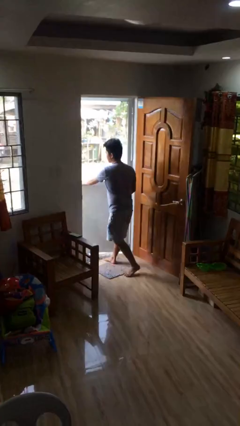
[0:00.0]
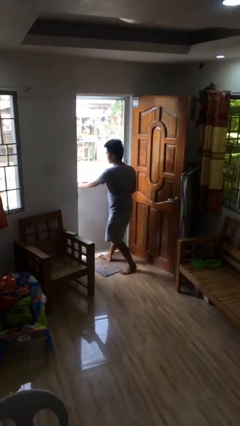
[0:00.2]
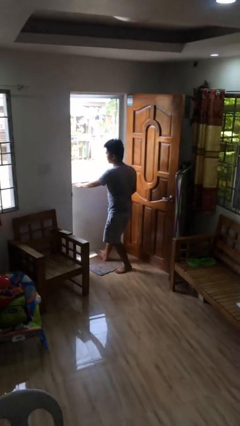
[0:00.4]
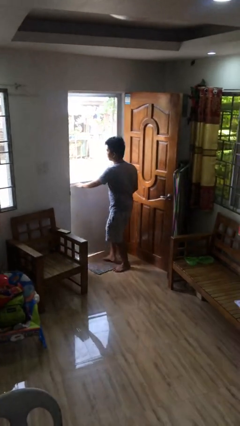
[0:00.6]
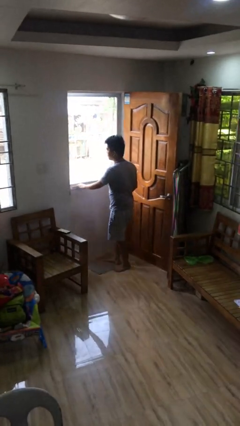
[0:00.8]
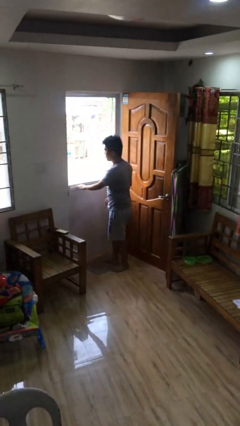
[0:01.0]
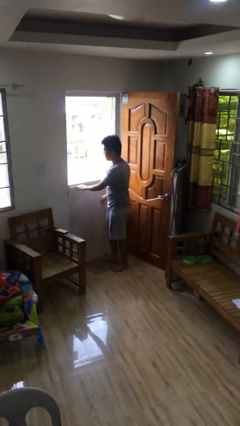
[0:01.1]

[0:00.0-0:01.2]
person closes facility door

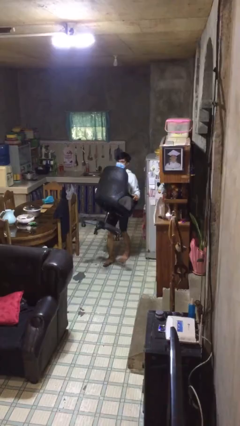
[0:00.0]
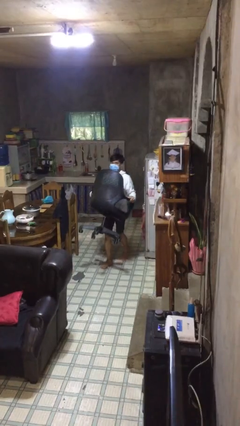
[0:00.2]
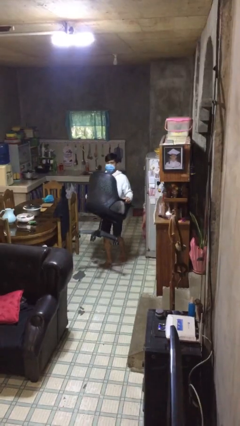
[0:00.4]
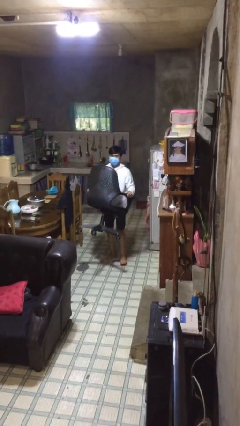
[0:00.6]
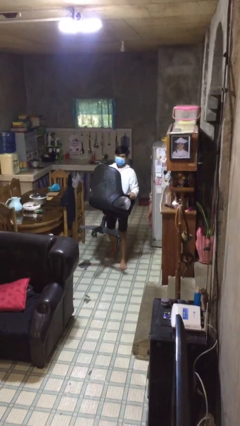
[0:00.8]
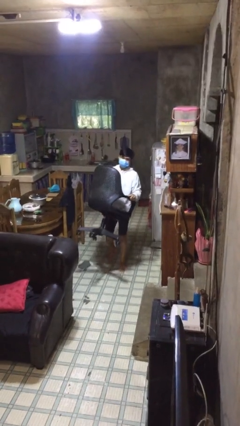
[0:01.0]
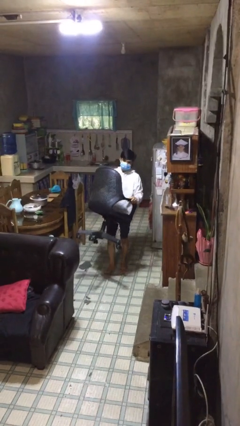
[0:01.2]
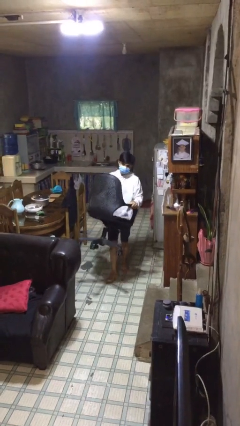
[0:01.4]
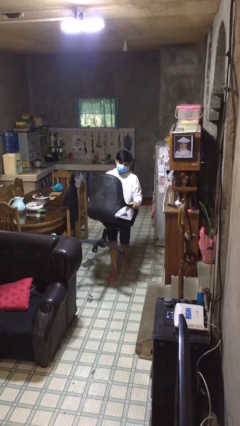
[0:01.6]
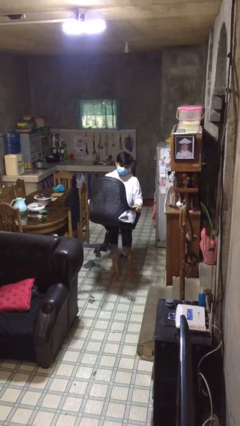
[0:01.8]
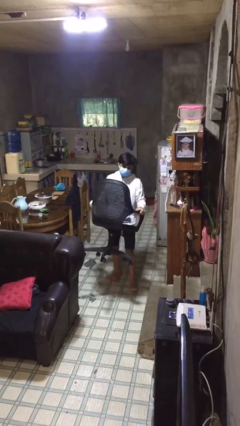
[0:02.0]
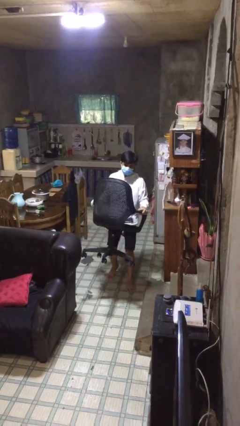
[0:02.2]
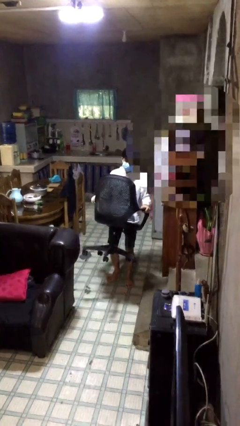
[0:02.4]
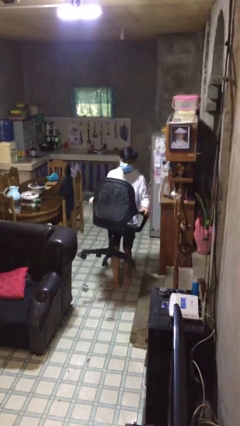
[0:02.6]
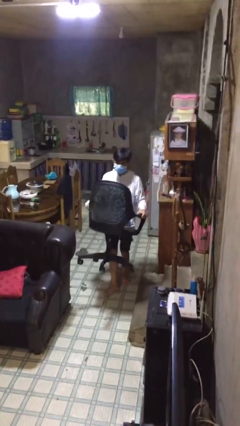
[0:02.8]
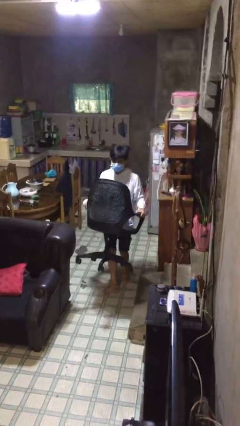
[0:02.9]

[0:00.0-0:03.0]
person carries heavy object

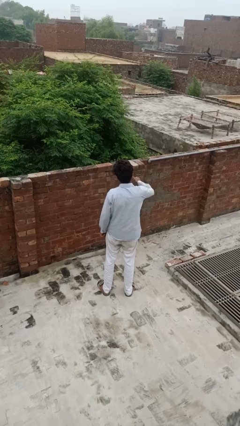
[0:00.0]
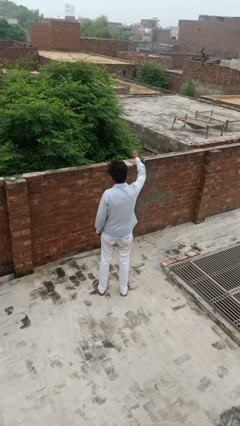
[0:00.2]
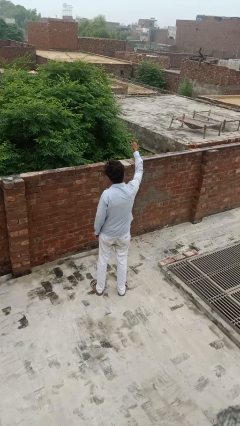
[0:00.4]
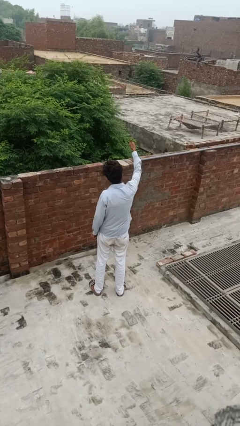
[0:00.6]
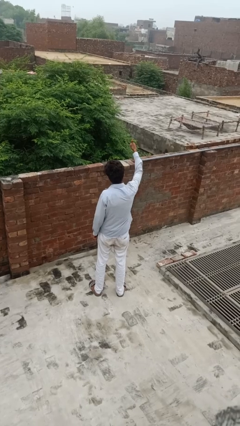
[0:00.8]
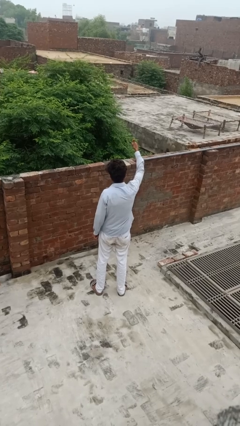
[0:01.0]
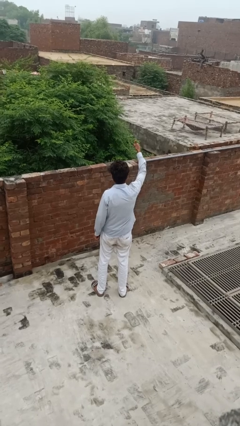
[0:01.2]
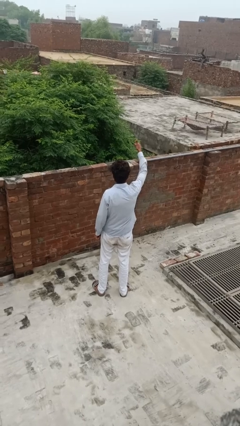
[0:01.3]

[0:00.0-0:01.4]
person gestures thumbs up

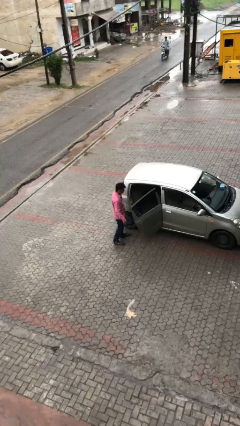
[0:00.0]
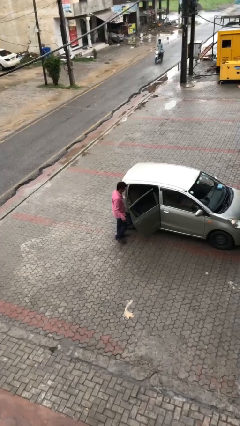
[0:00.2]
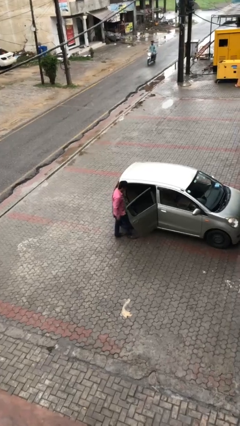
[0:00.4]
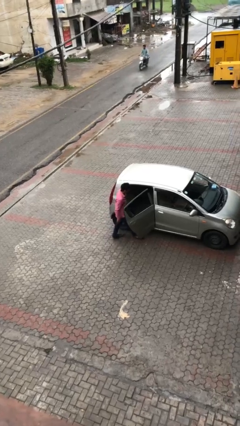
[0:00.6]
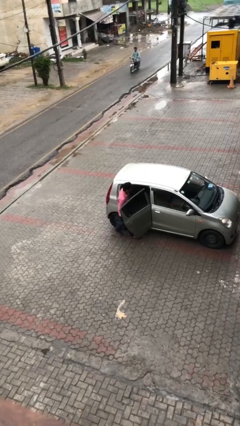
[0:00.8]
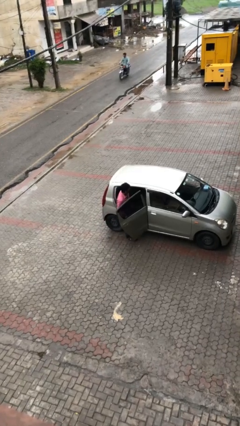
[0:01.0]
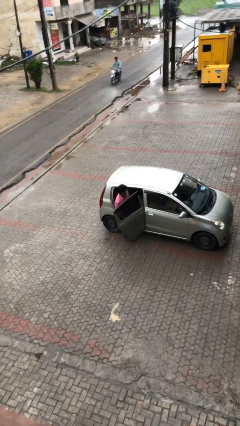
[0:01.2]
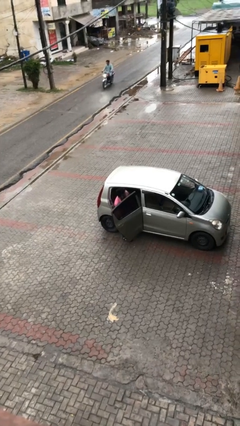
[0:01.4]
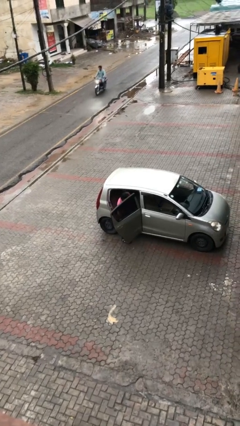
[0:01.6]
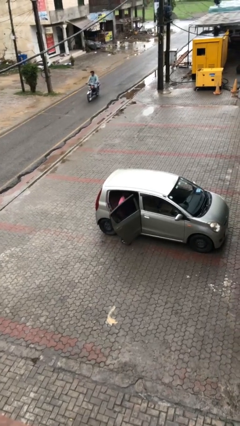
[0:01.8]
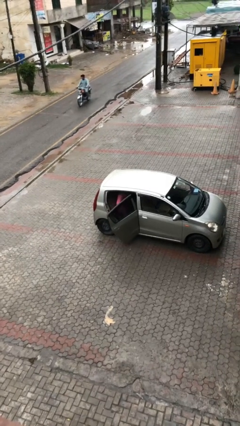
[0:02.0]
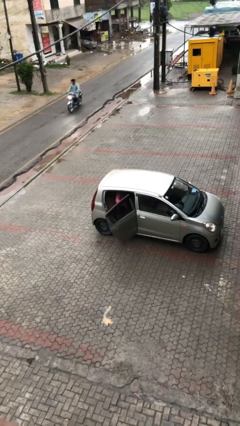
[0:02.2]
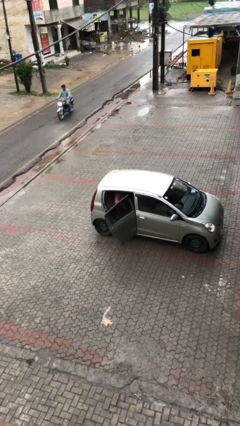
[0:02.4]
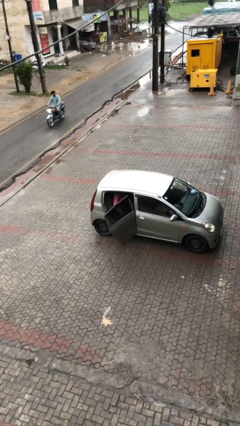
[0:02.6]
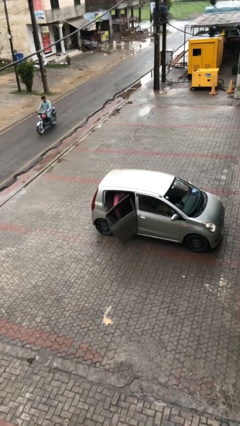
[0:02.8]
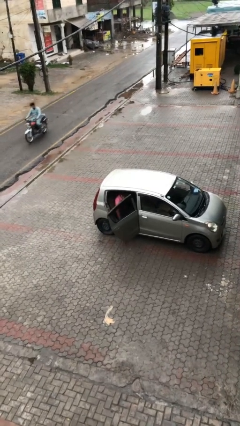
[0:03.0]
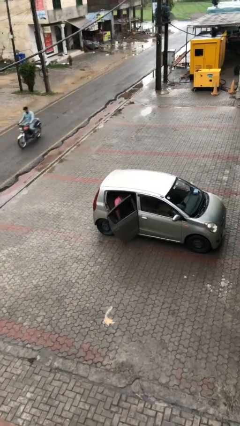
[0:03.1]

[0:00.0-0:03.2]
person enters car

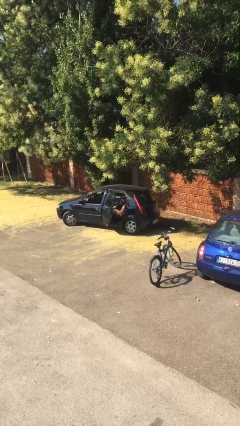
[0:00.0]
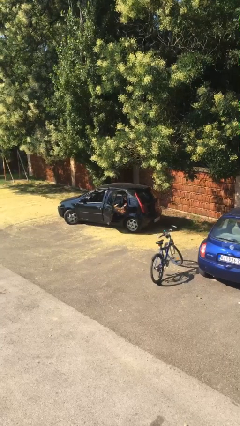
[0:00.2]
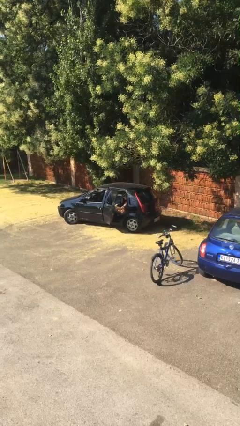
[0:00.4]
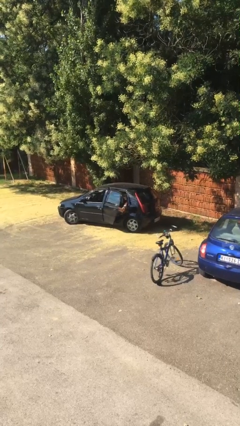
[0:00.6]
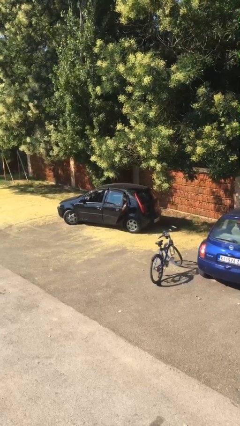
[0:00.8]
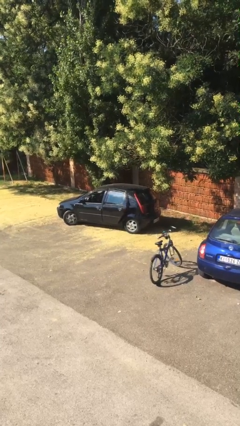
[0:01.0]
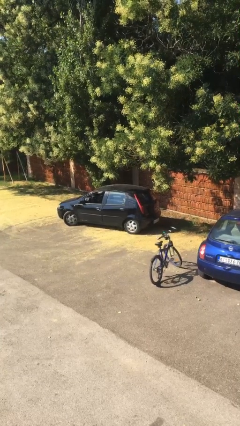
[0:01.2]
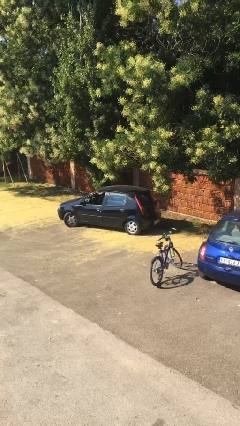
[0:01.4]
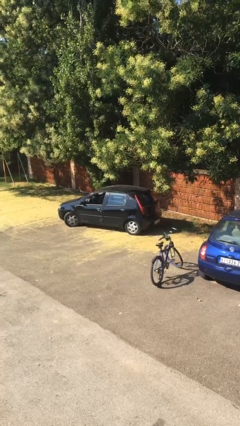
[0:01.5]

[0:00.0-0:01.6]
person closes car door

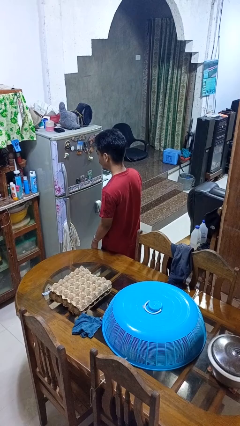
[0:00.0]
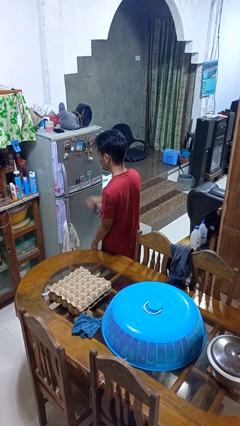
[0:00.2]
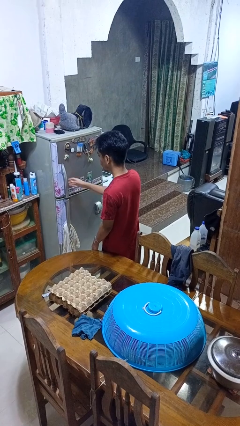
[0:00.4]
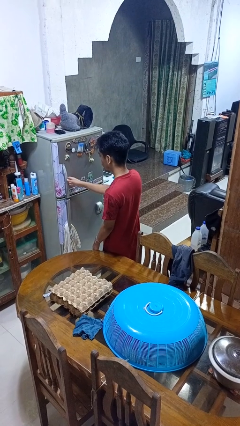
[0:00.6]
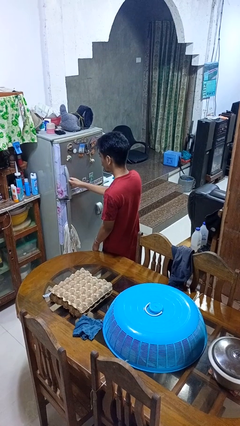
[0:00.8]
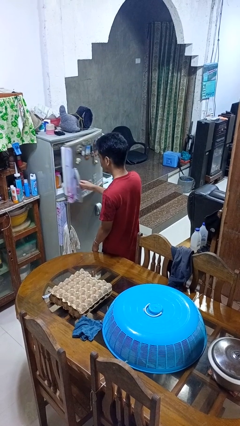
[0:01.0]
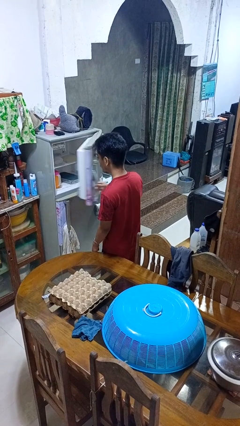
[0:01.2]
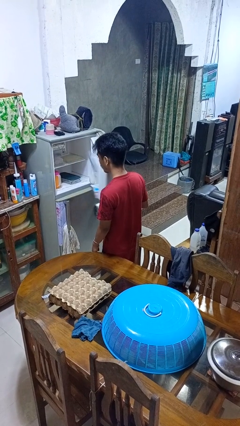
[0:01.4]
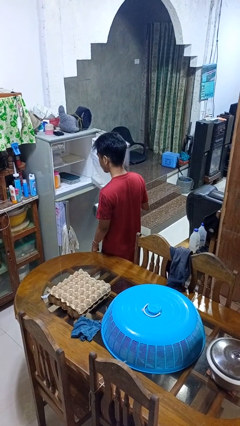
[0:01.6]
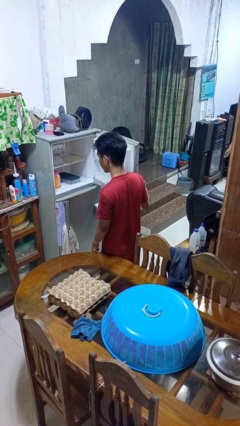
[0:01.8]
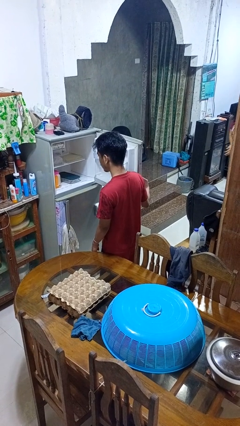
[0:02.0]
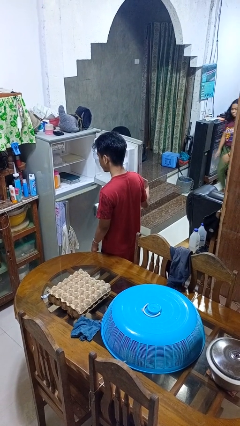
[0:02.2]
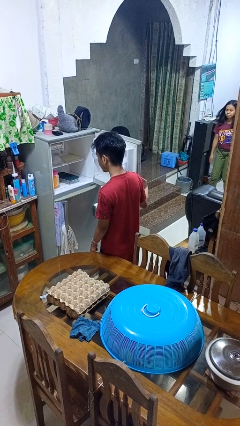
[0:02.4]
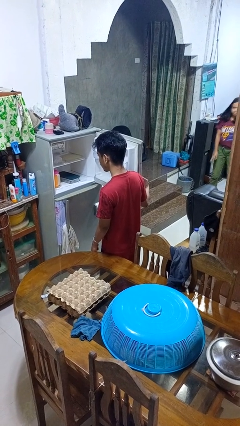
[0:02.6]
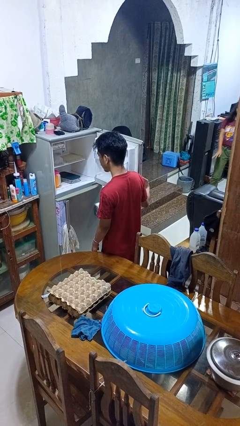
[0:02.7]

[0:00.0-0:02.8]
person opens refrigerator

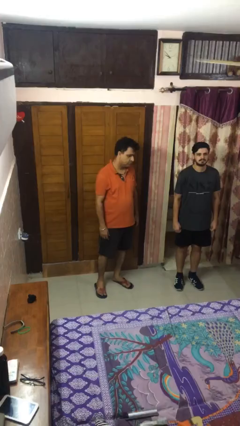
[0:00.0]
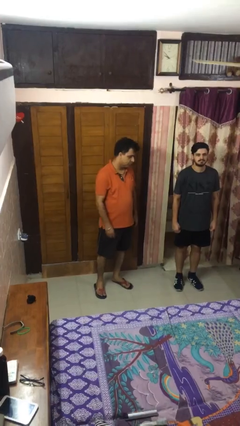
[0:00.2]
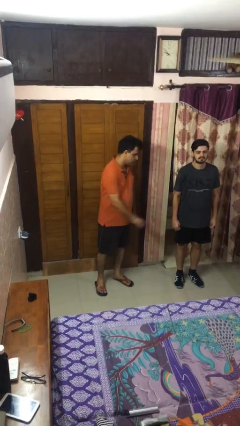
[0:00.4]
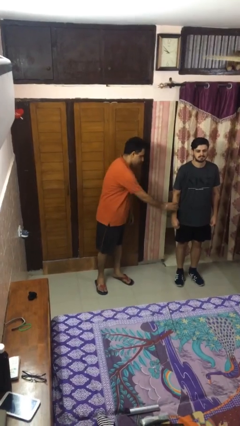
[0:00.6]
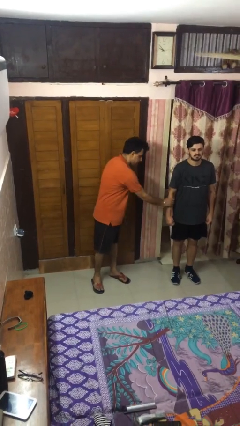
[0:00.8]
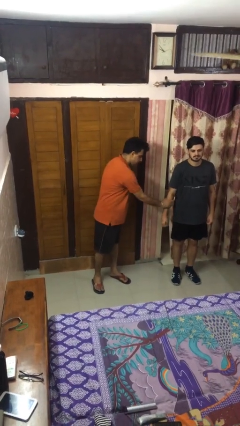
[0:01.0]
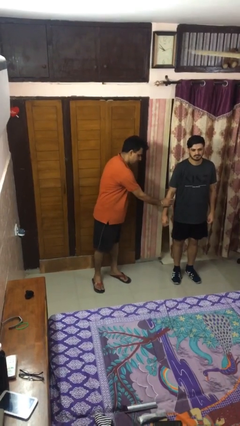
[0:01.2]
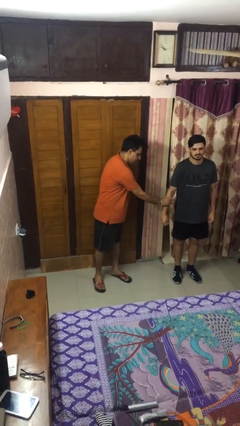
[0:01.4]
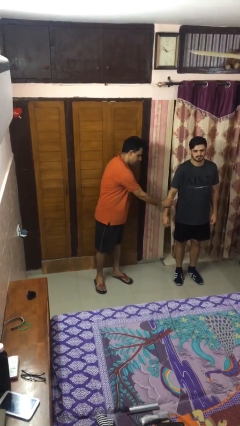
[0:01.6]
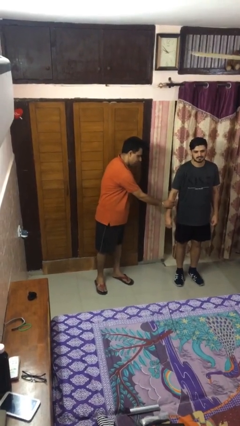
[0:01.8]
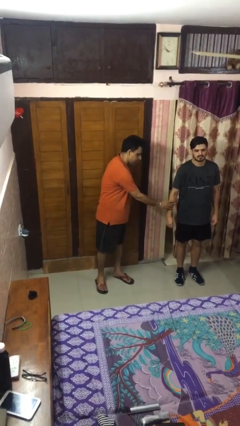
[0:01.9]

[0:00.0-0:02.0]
person grabs person by forearm

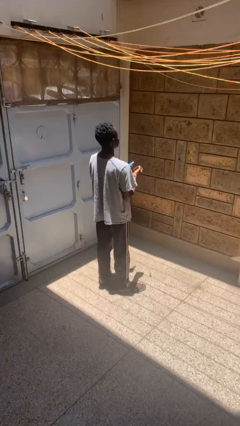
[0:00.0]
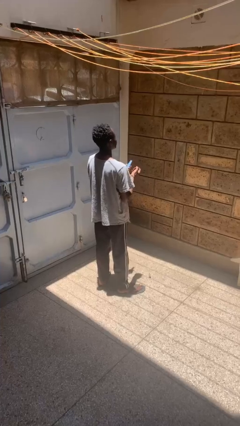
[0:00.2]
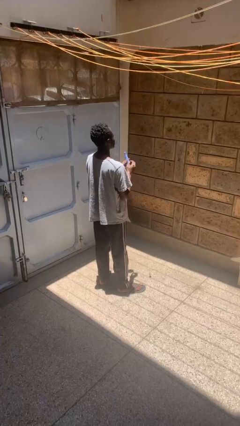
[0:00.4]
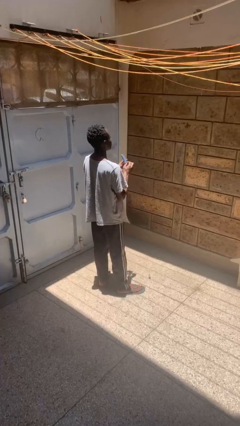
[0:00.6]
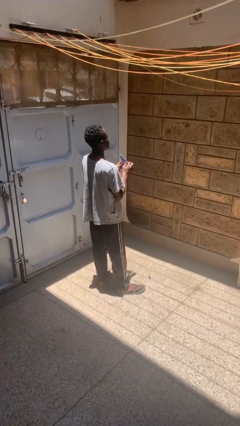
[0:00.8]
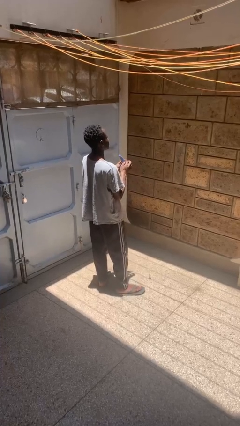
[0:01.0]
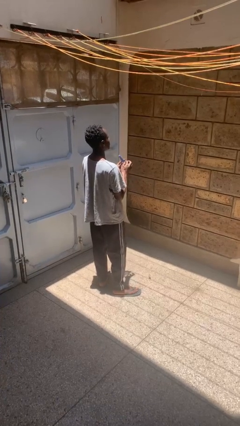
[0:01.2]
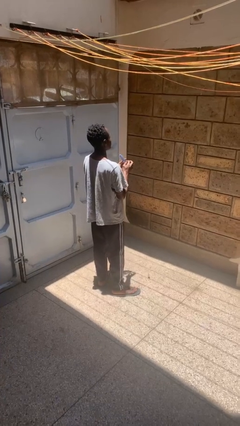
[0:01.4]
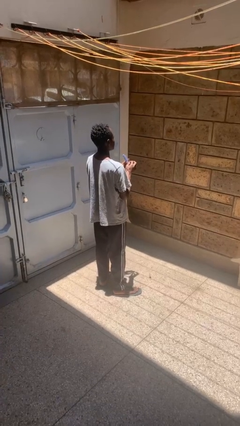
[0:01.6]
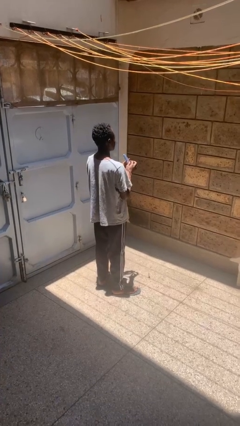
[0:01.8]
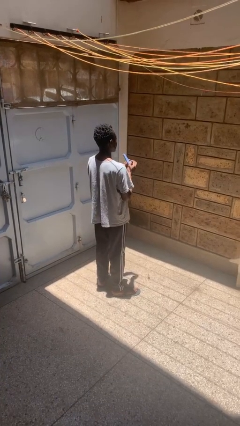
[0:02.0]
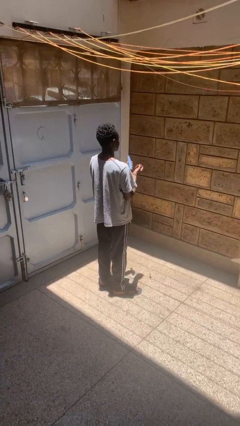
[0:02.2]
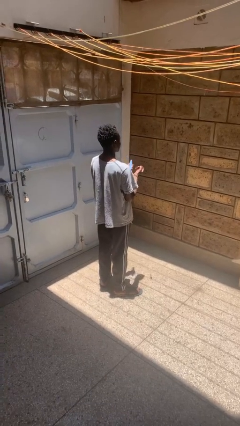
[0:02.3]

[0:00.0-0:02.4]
person files fingernails
